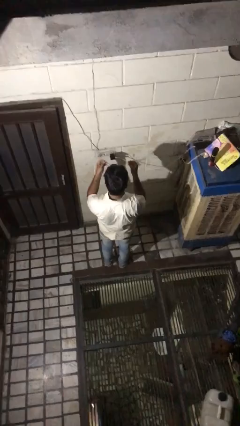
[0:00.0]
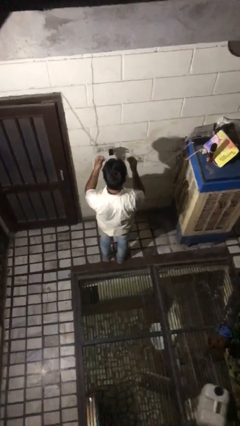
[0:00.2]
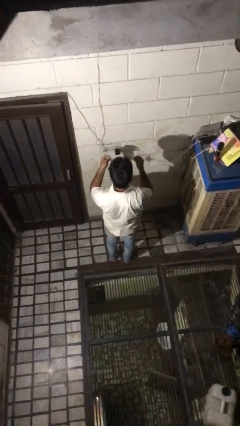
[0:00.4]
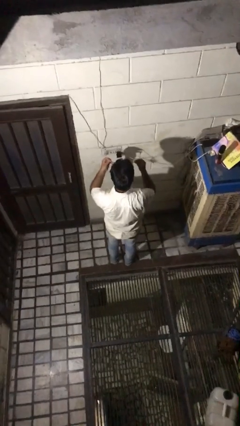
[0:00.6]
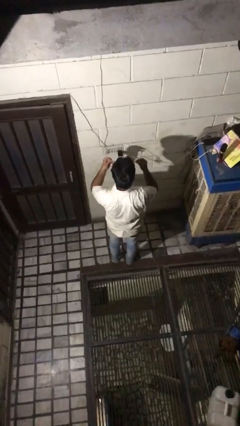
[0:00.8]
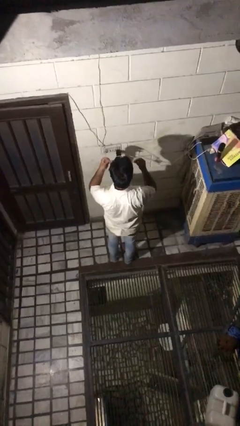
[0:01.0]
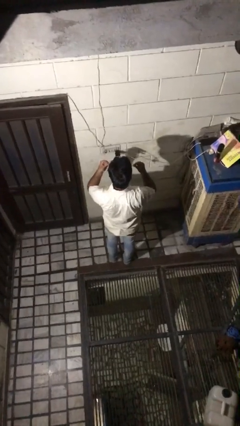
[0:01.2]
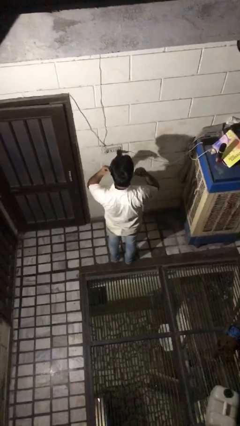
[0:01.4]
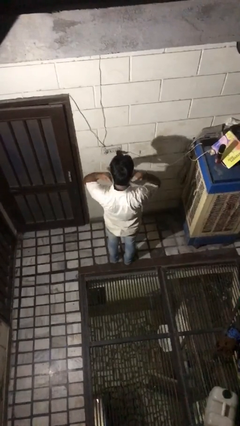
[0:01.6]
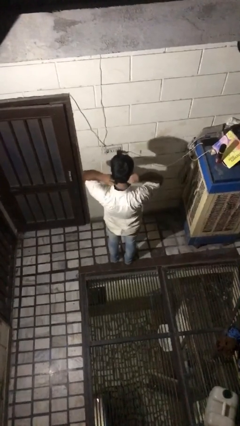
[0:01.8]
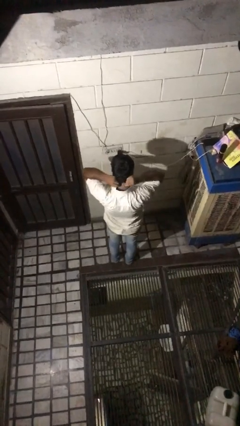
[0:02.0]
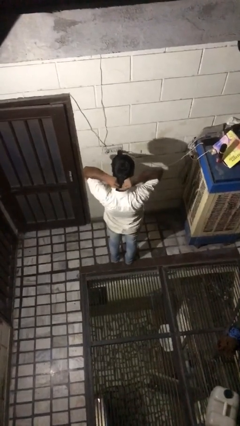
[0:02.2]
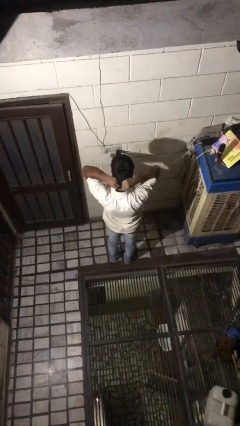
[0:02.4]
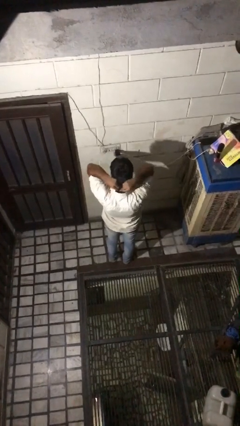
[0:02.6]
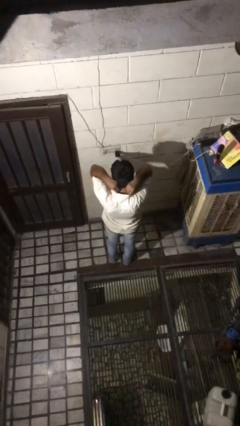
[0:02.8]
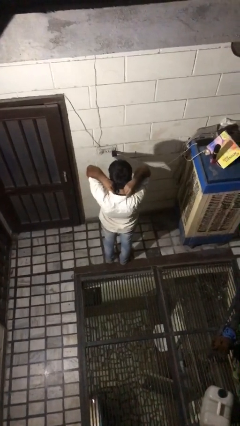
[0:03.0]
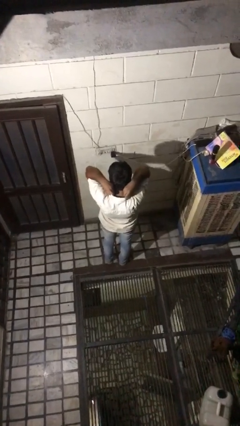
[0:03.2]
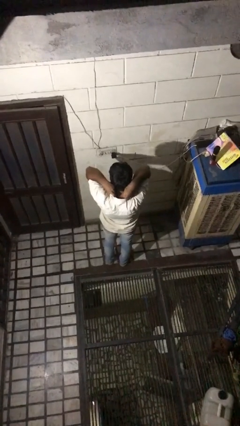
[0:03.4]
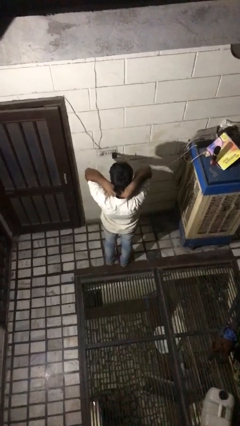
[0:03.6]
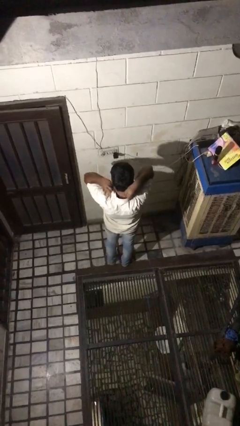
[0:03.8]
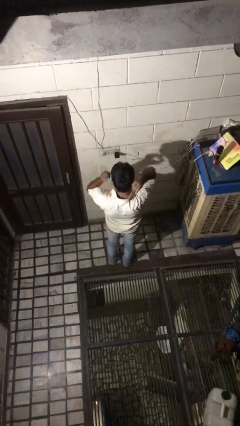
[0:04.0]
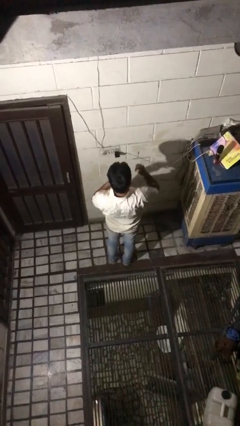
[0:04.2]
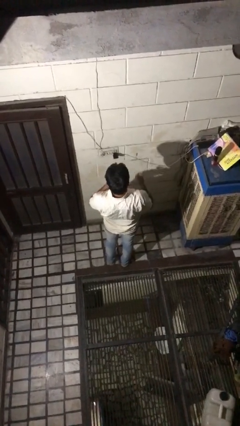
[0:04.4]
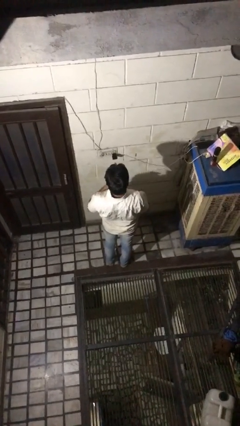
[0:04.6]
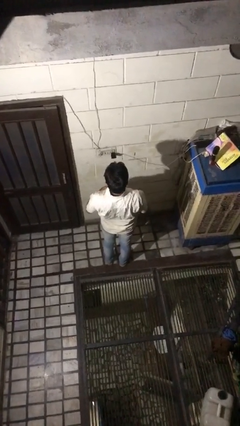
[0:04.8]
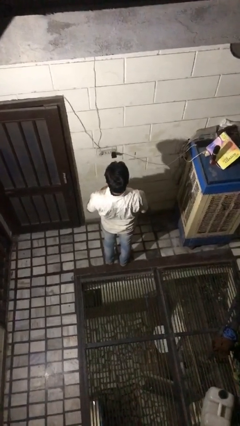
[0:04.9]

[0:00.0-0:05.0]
person puts on necklace

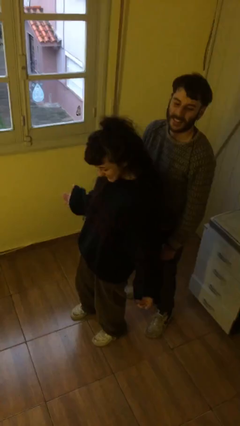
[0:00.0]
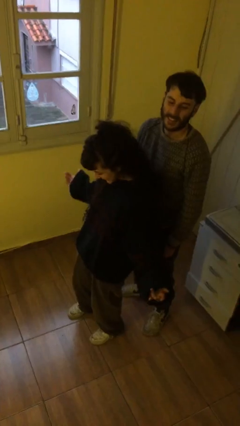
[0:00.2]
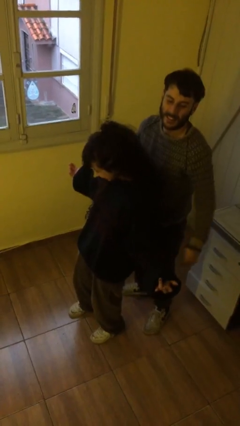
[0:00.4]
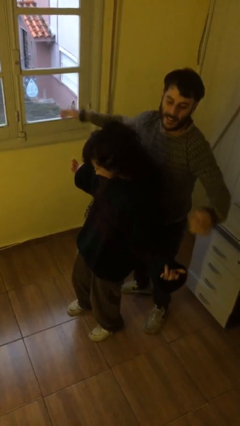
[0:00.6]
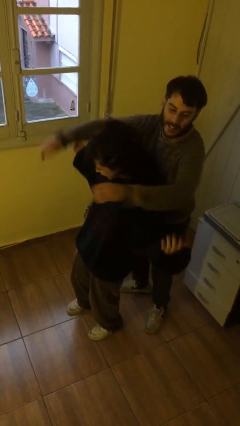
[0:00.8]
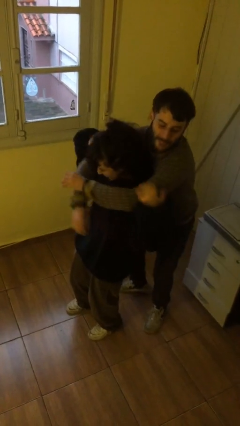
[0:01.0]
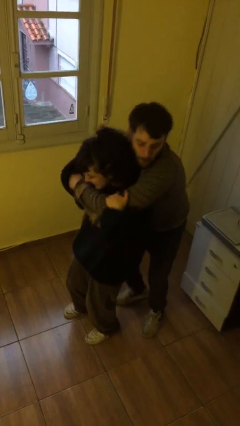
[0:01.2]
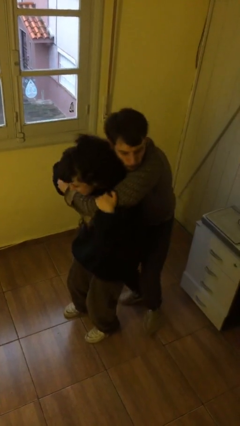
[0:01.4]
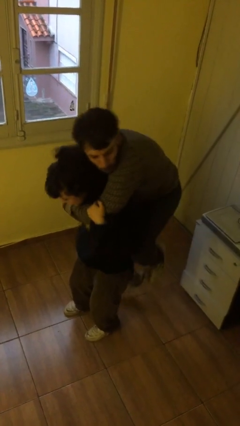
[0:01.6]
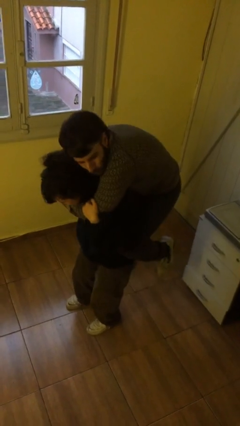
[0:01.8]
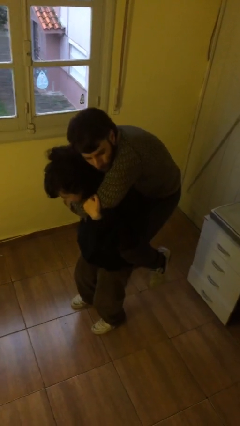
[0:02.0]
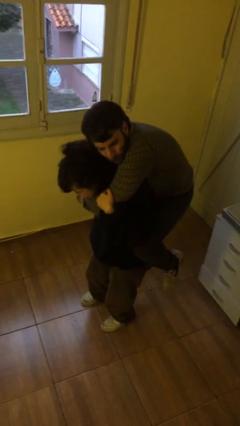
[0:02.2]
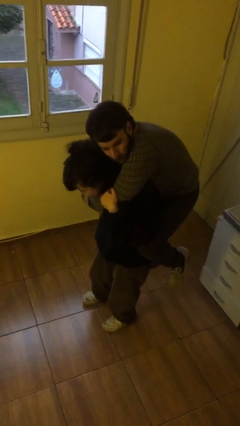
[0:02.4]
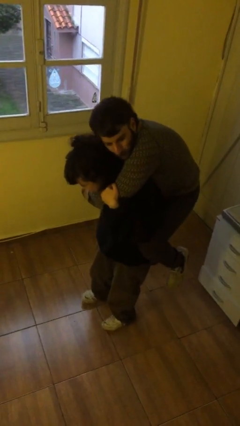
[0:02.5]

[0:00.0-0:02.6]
person picks up person

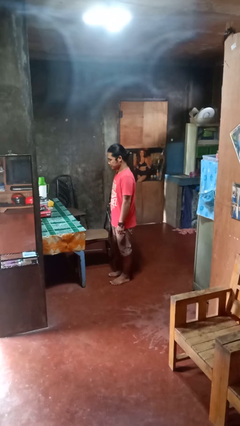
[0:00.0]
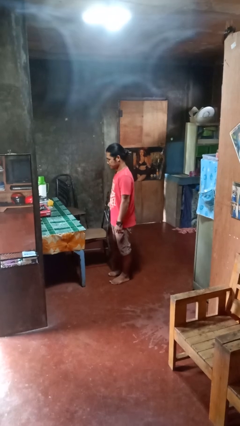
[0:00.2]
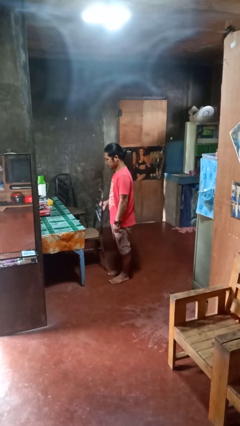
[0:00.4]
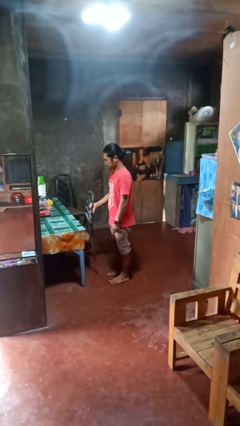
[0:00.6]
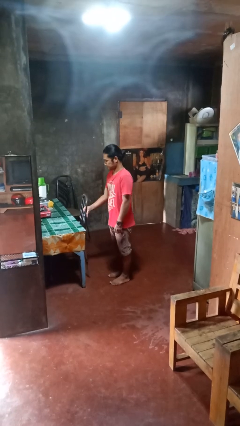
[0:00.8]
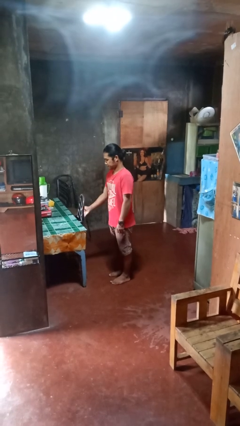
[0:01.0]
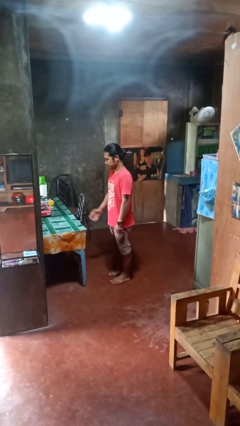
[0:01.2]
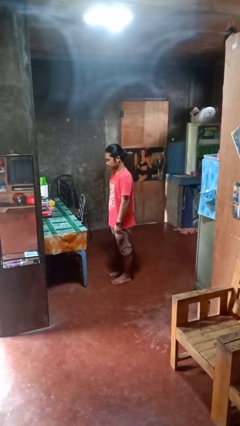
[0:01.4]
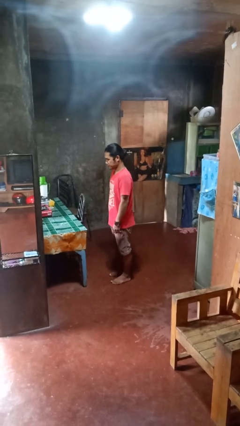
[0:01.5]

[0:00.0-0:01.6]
person pushes in chair

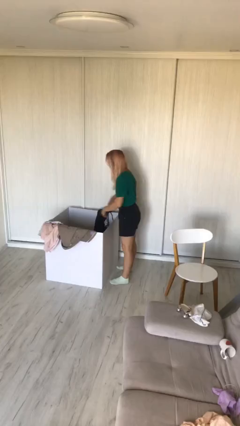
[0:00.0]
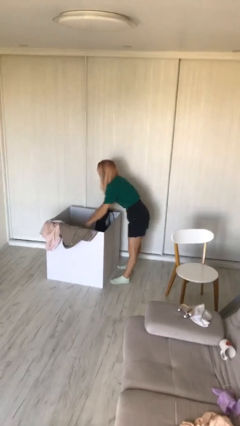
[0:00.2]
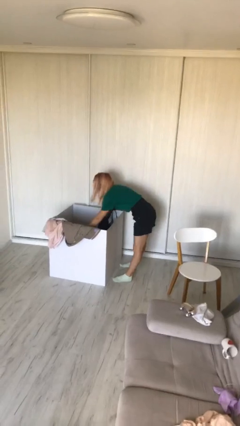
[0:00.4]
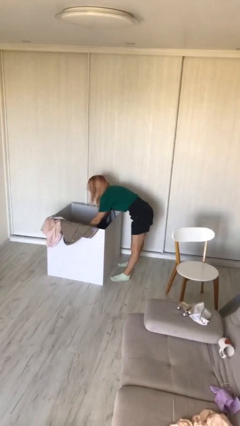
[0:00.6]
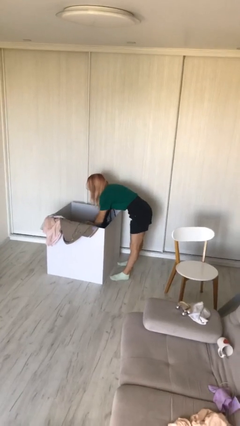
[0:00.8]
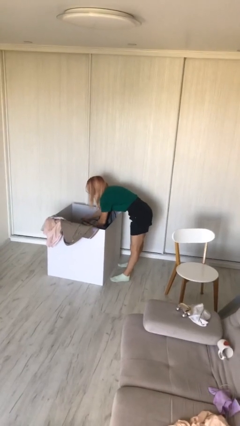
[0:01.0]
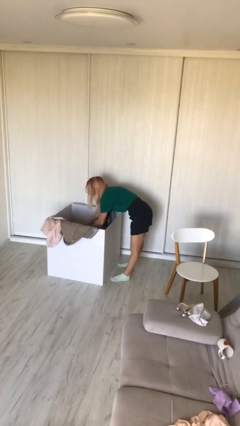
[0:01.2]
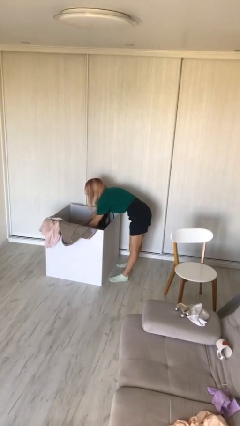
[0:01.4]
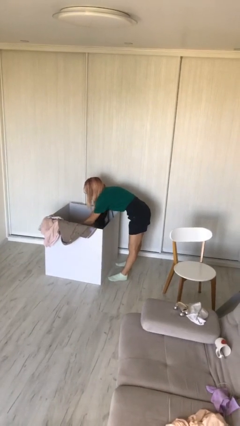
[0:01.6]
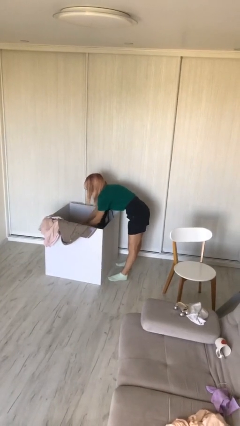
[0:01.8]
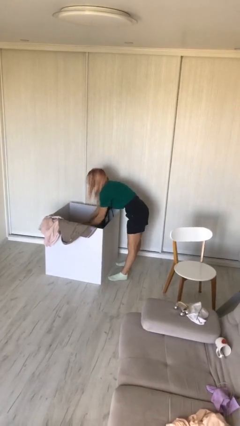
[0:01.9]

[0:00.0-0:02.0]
person searches in box

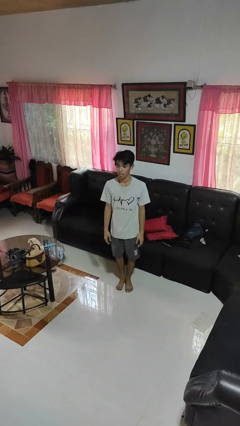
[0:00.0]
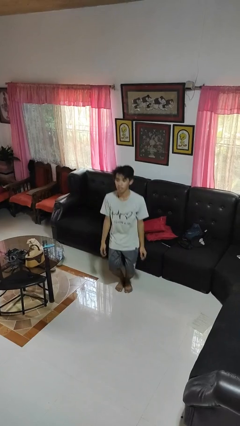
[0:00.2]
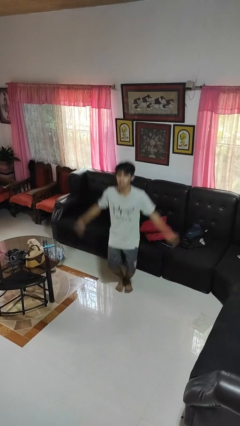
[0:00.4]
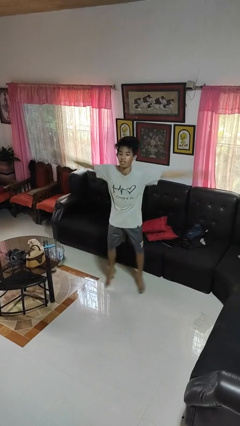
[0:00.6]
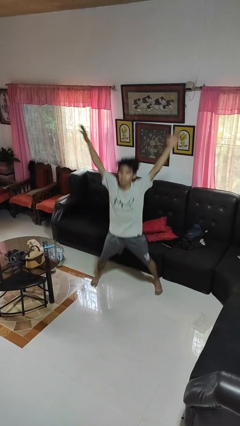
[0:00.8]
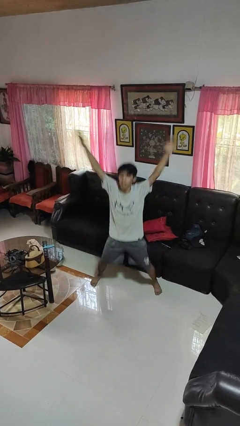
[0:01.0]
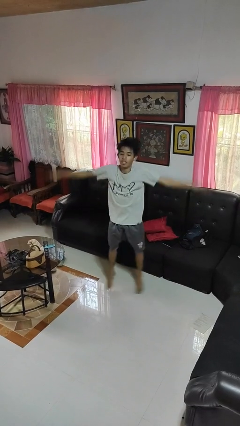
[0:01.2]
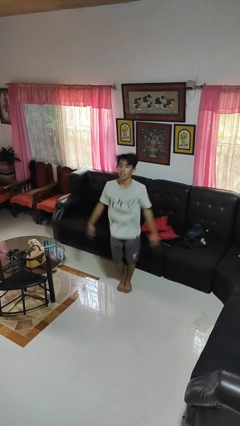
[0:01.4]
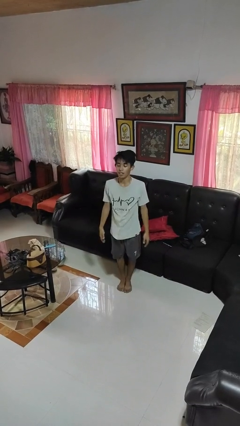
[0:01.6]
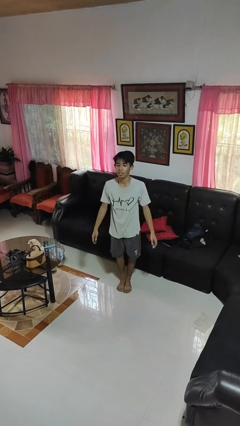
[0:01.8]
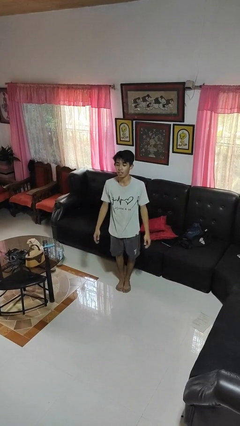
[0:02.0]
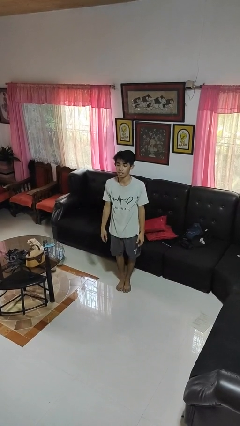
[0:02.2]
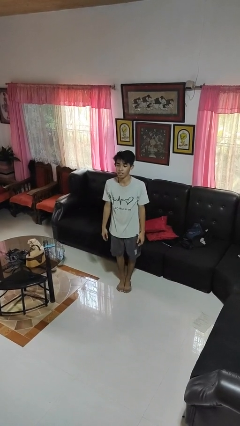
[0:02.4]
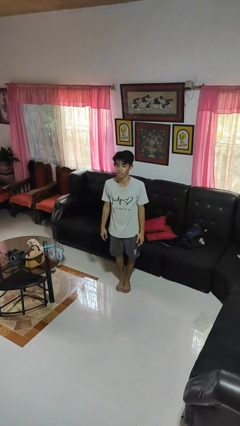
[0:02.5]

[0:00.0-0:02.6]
person exercises with jumping jacks

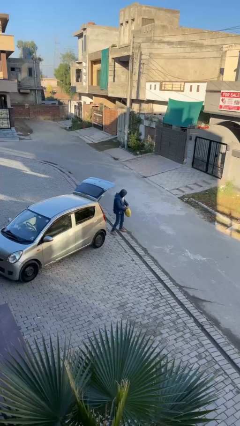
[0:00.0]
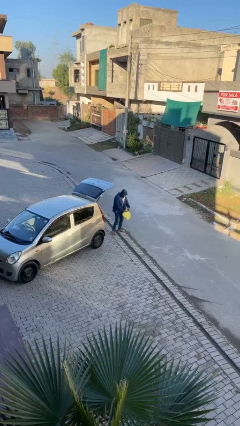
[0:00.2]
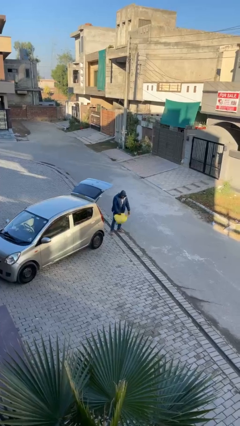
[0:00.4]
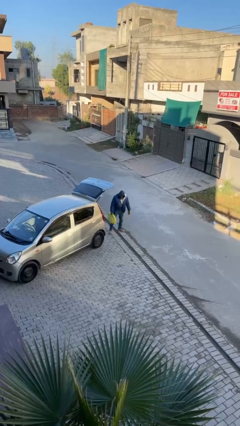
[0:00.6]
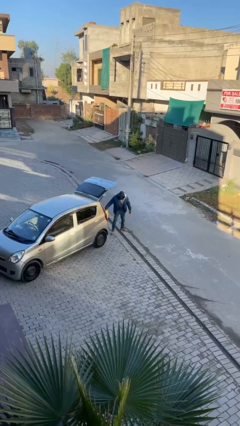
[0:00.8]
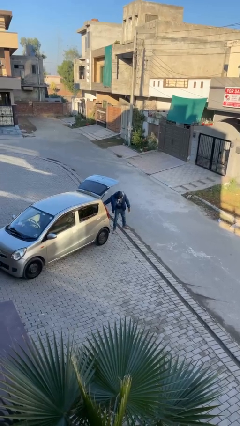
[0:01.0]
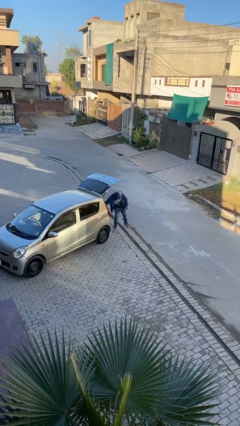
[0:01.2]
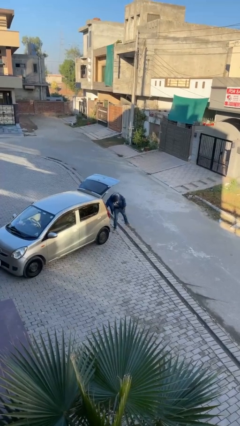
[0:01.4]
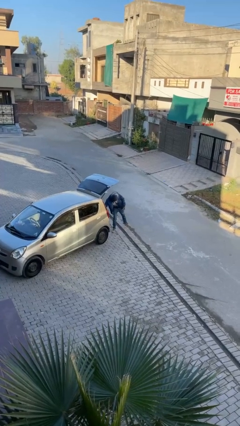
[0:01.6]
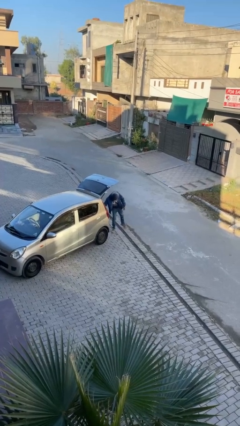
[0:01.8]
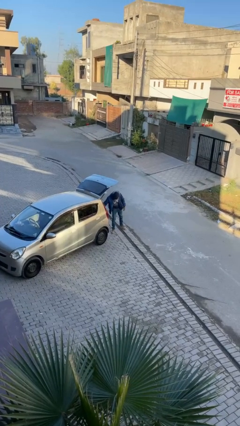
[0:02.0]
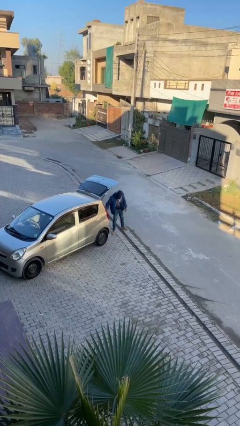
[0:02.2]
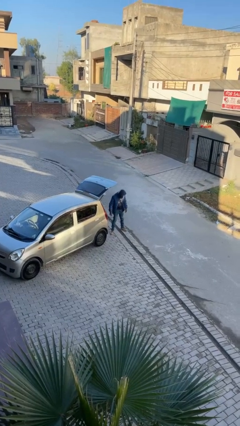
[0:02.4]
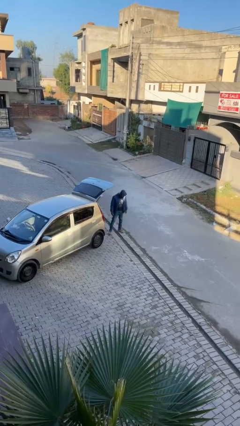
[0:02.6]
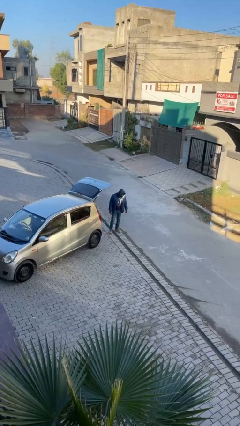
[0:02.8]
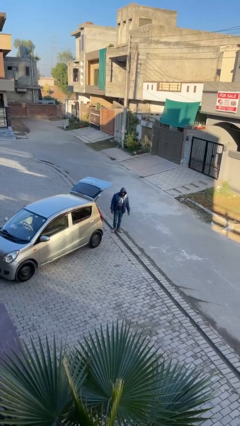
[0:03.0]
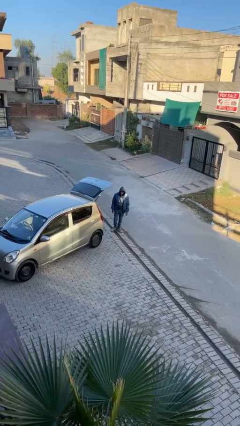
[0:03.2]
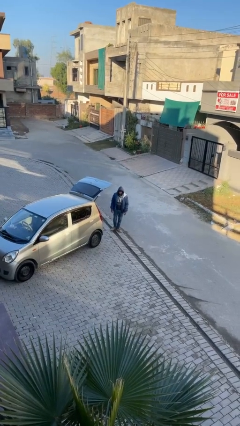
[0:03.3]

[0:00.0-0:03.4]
person loads car
